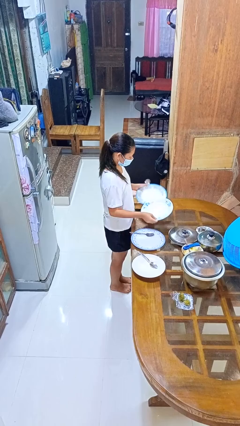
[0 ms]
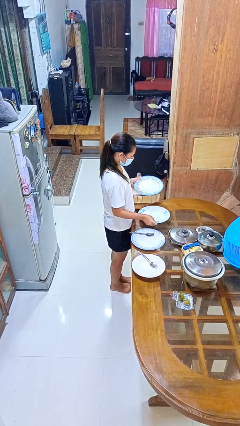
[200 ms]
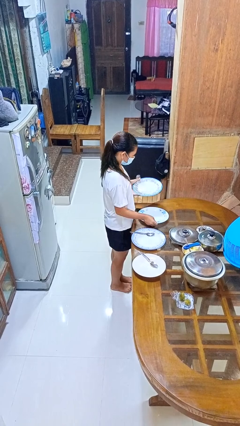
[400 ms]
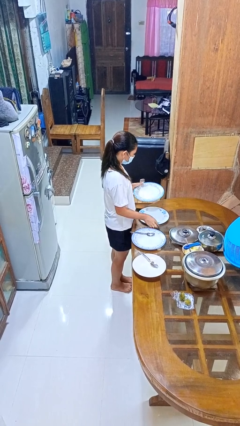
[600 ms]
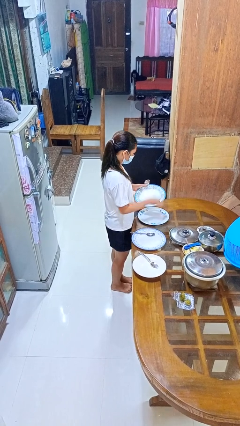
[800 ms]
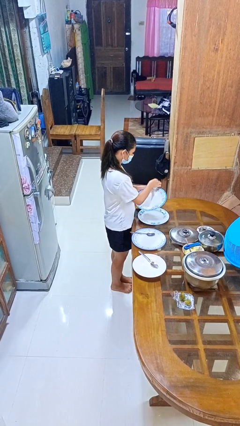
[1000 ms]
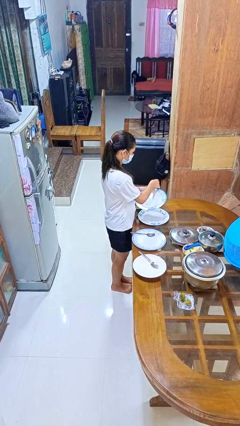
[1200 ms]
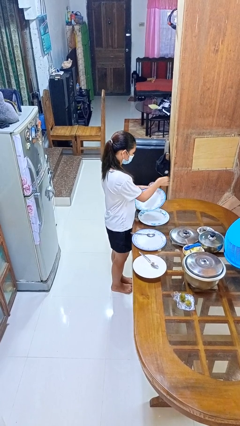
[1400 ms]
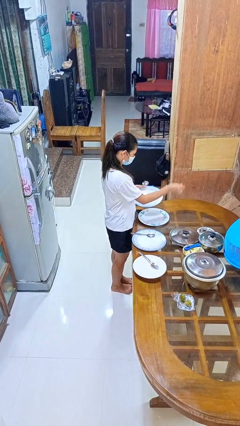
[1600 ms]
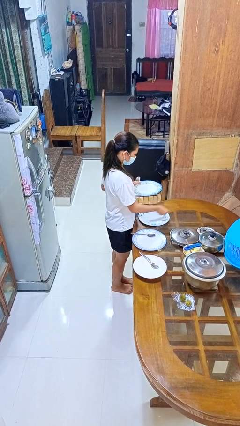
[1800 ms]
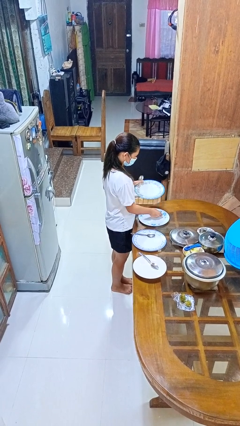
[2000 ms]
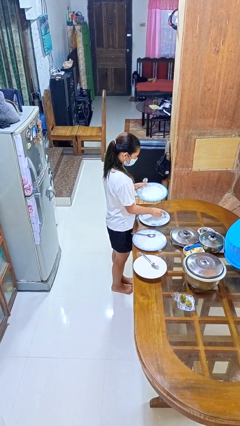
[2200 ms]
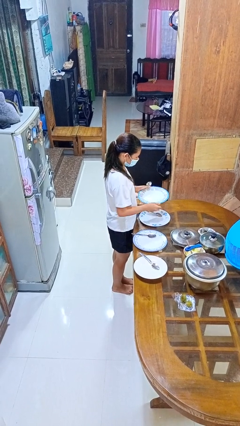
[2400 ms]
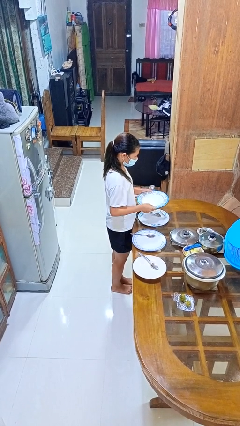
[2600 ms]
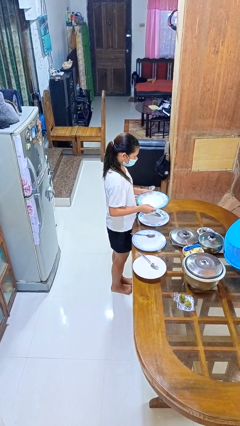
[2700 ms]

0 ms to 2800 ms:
person sets table

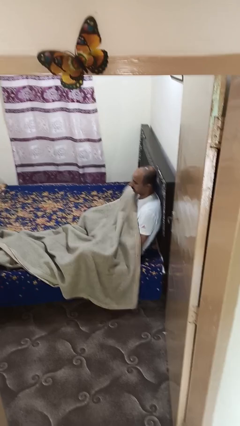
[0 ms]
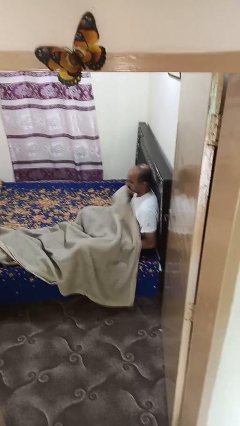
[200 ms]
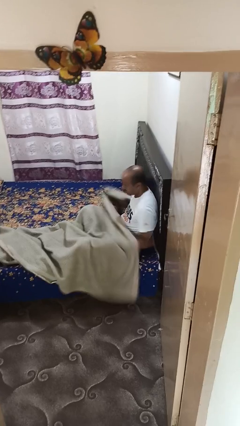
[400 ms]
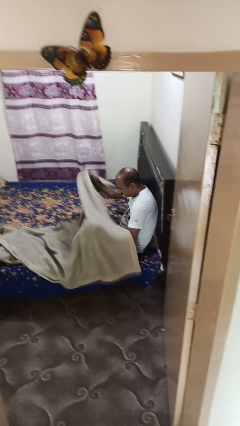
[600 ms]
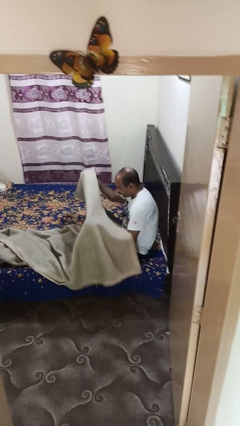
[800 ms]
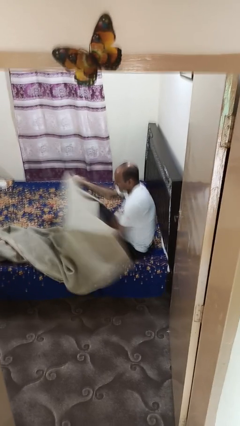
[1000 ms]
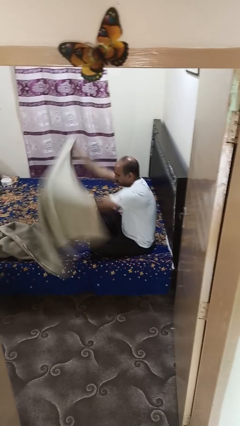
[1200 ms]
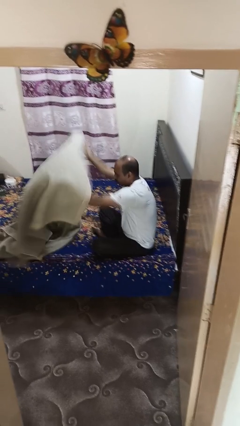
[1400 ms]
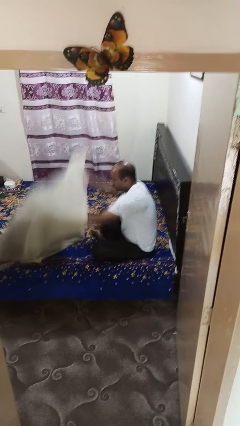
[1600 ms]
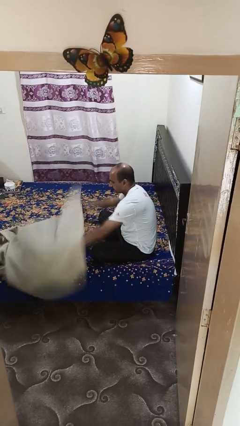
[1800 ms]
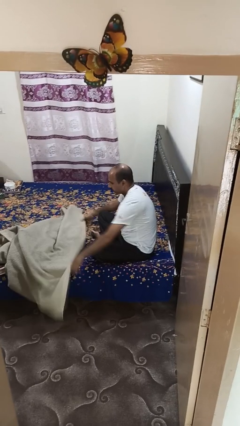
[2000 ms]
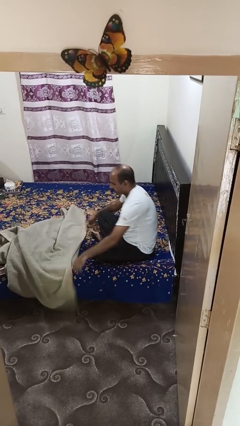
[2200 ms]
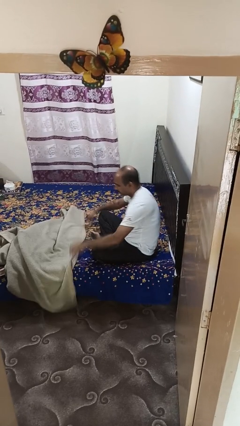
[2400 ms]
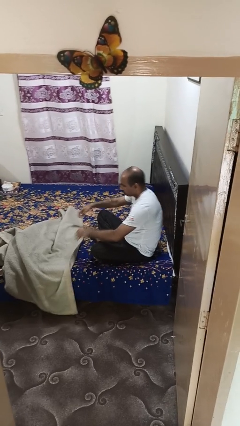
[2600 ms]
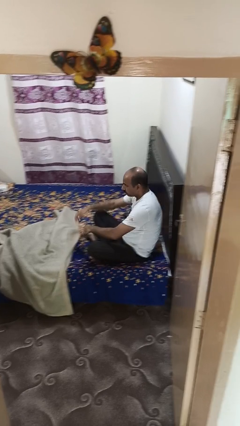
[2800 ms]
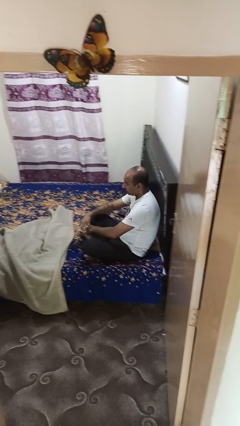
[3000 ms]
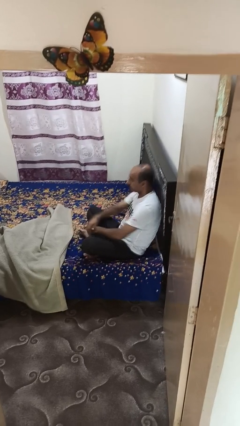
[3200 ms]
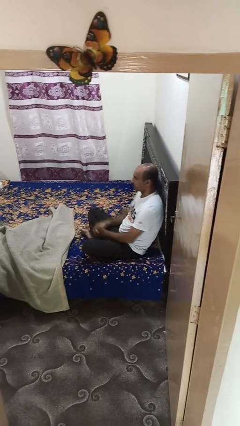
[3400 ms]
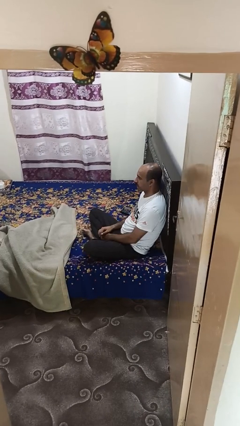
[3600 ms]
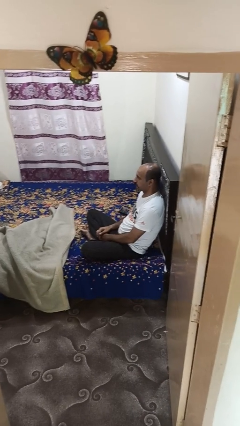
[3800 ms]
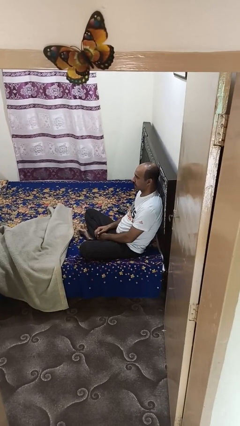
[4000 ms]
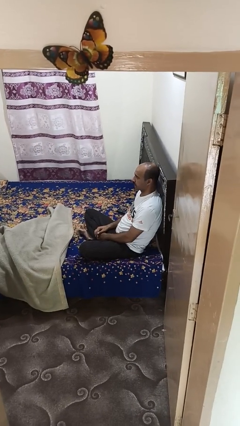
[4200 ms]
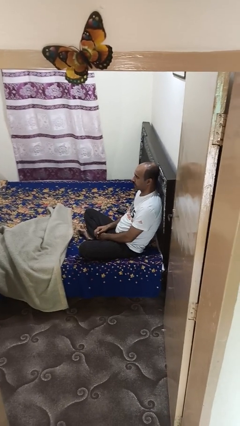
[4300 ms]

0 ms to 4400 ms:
person uncovers with blanket

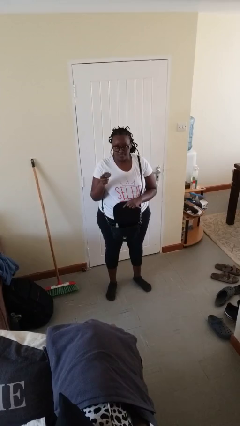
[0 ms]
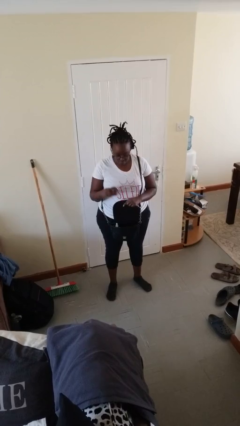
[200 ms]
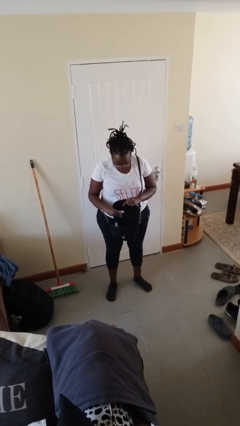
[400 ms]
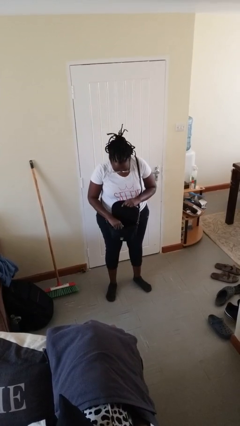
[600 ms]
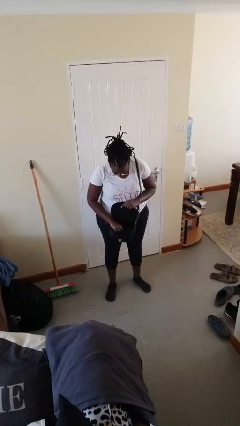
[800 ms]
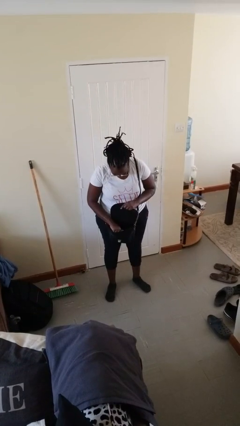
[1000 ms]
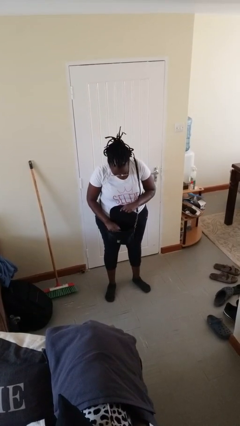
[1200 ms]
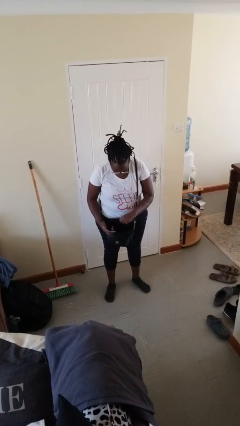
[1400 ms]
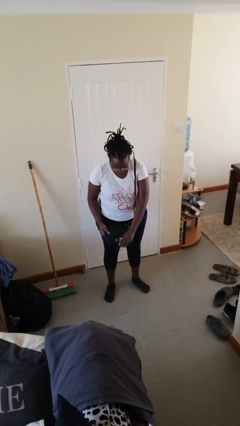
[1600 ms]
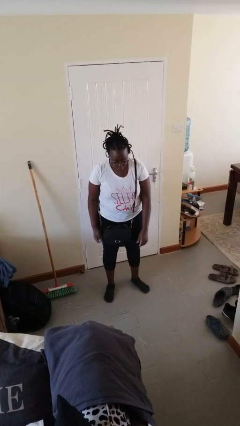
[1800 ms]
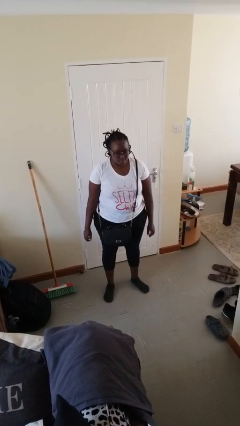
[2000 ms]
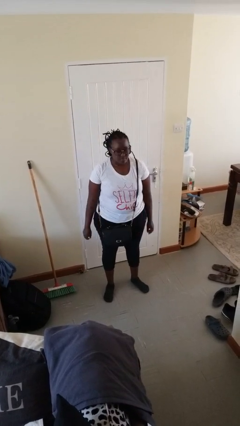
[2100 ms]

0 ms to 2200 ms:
person puts object into purse

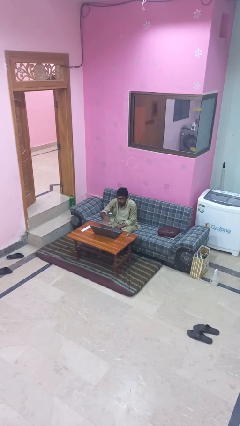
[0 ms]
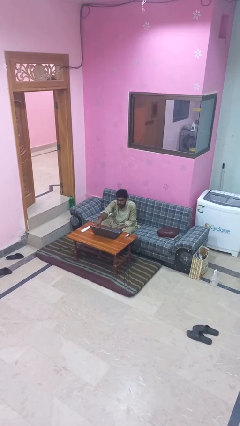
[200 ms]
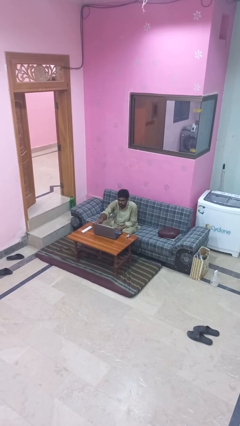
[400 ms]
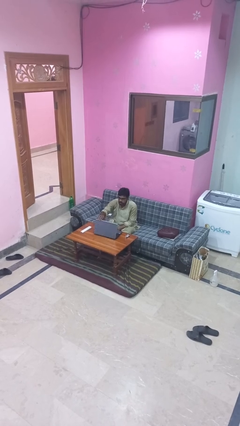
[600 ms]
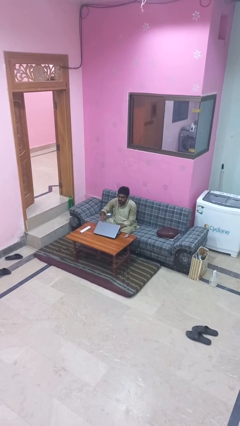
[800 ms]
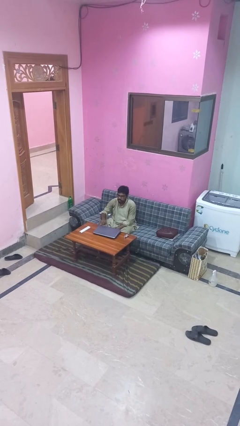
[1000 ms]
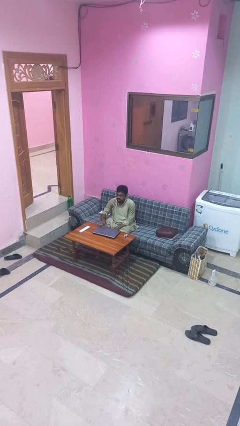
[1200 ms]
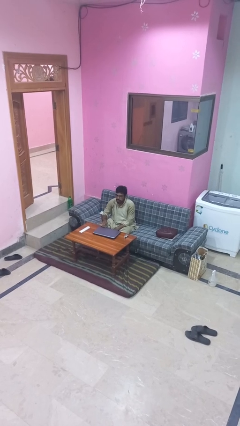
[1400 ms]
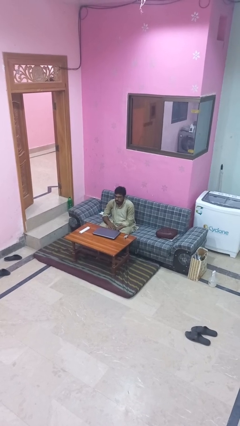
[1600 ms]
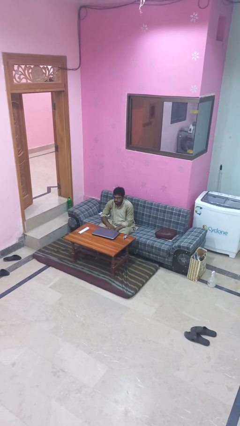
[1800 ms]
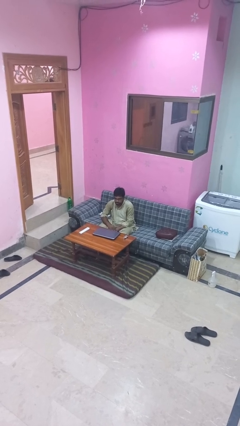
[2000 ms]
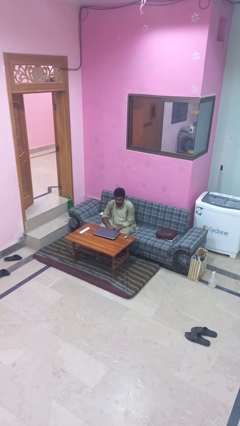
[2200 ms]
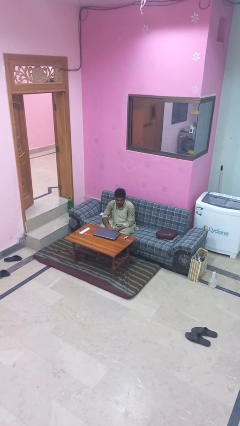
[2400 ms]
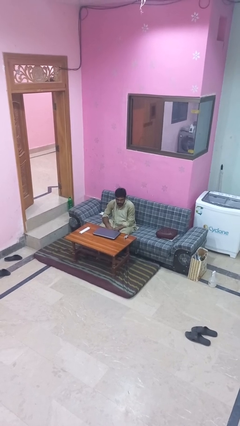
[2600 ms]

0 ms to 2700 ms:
person closes laptop

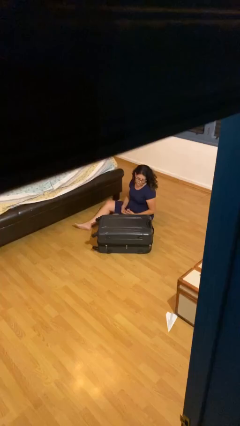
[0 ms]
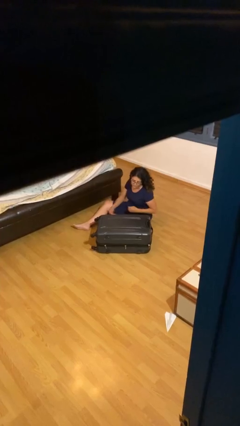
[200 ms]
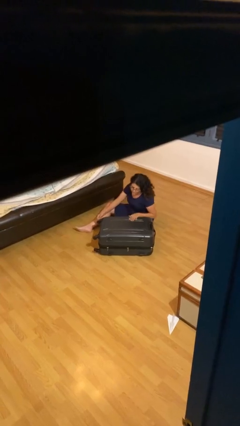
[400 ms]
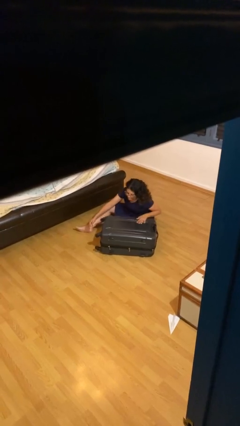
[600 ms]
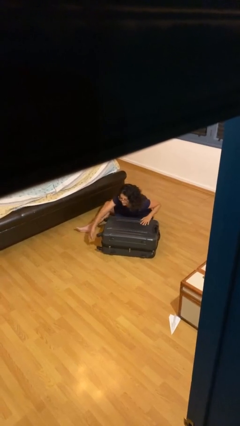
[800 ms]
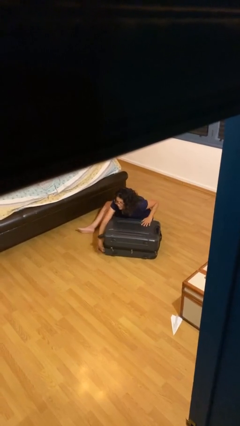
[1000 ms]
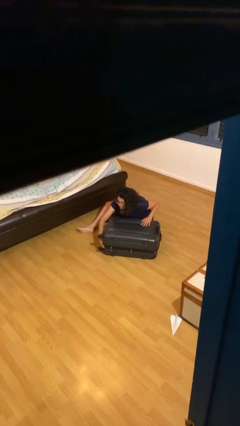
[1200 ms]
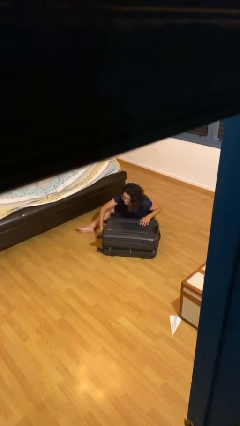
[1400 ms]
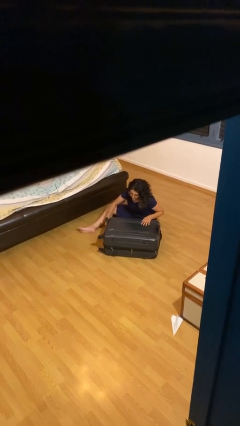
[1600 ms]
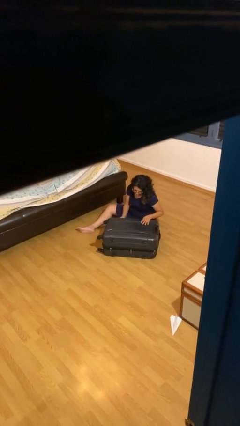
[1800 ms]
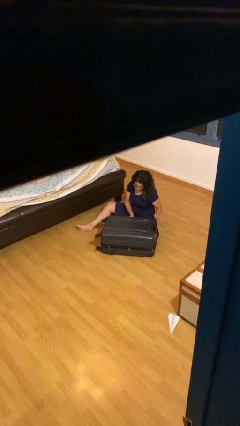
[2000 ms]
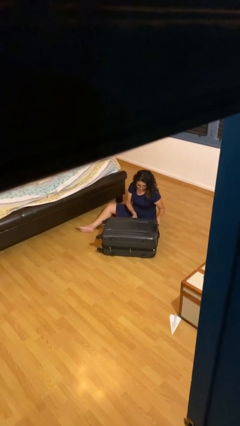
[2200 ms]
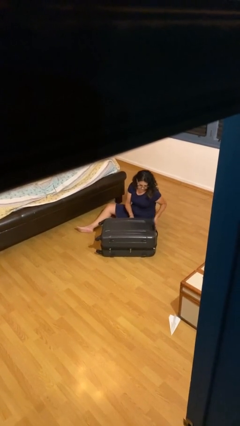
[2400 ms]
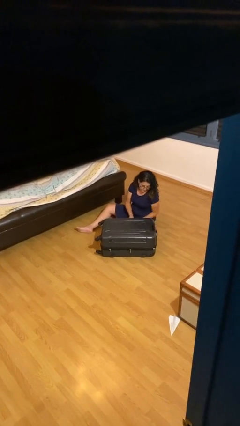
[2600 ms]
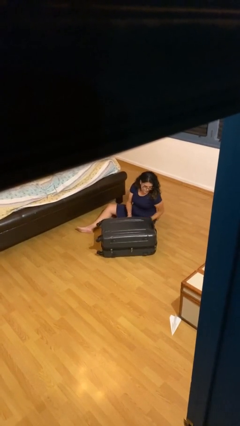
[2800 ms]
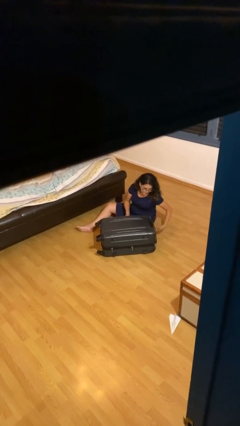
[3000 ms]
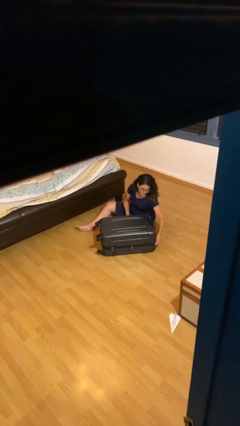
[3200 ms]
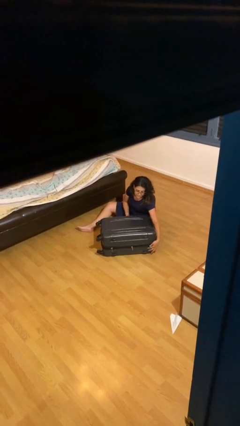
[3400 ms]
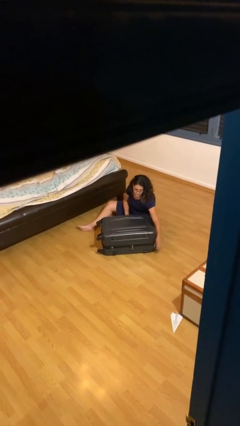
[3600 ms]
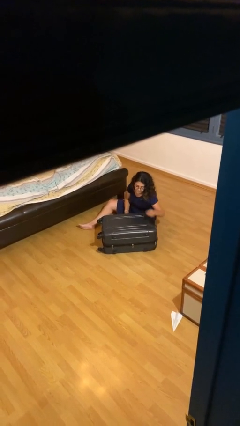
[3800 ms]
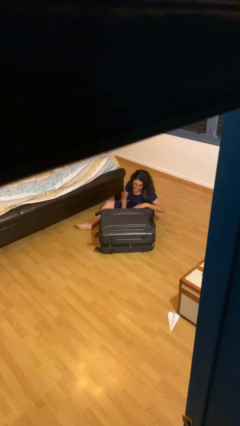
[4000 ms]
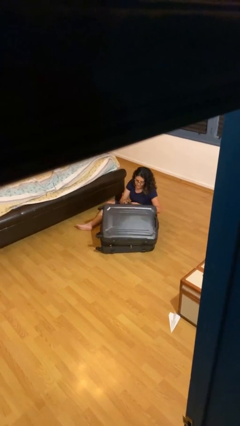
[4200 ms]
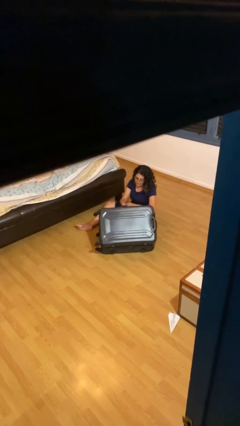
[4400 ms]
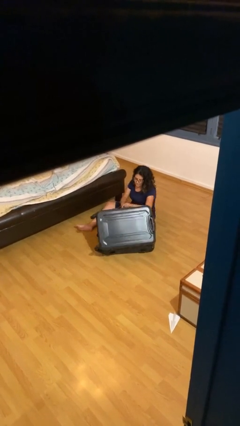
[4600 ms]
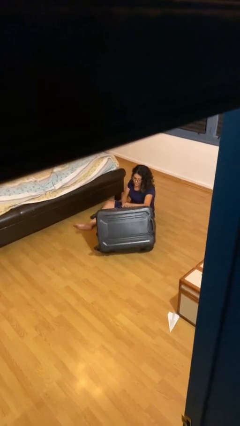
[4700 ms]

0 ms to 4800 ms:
person opens suitcase

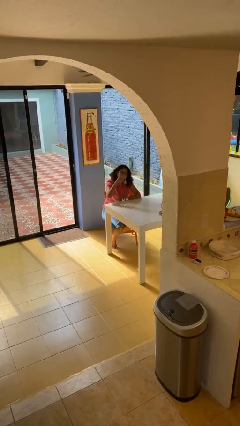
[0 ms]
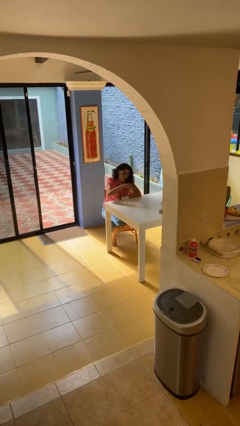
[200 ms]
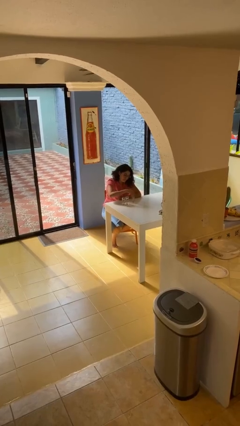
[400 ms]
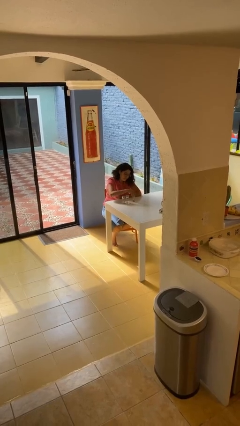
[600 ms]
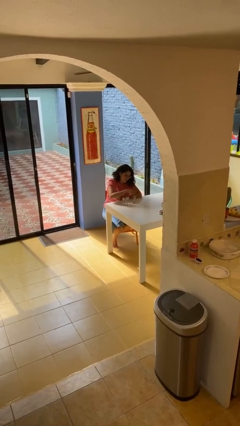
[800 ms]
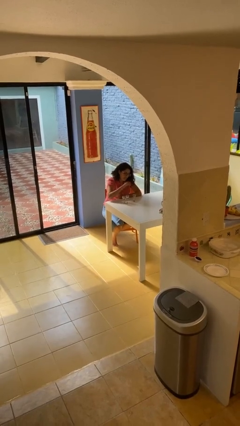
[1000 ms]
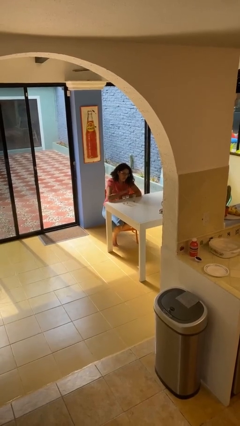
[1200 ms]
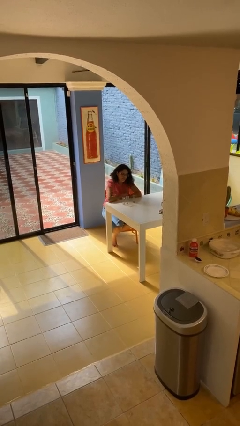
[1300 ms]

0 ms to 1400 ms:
person puts down object on table
